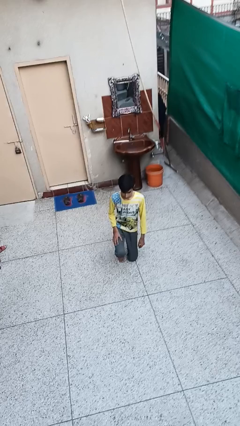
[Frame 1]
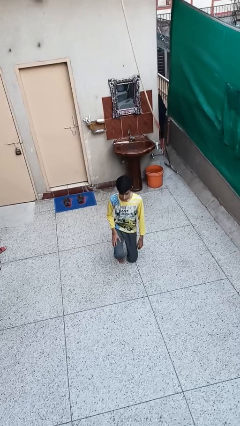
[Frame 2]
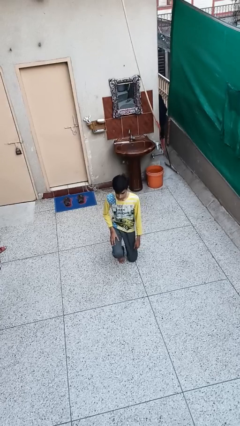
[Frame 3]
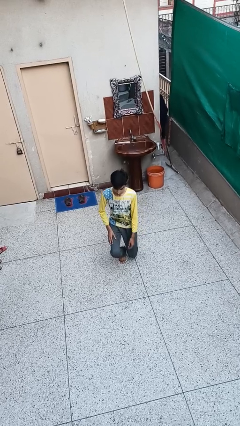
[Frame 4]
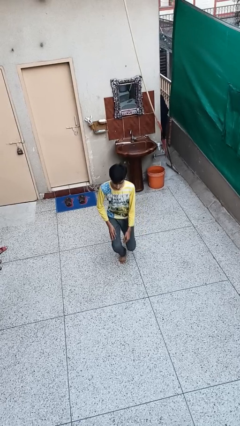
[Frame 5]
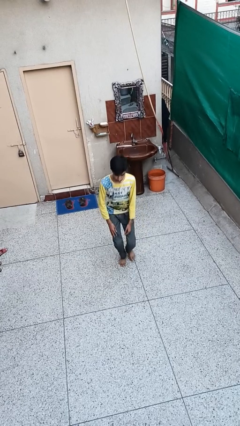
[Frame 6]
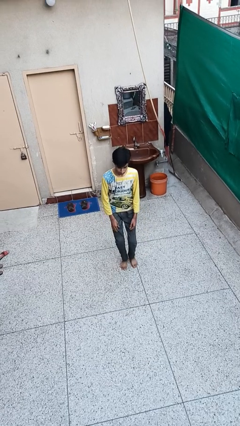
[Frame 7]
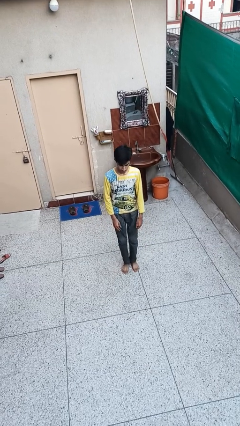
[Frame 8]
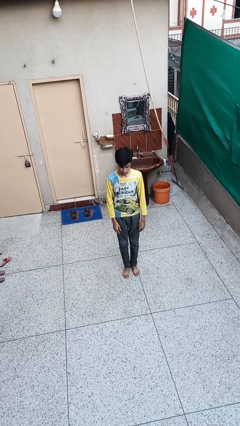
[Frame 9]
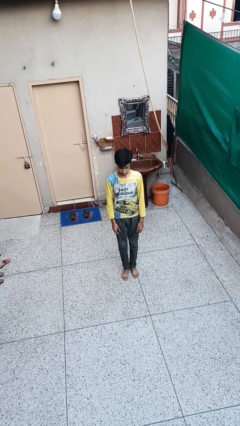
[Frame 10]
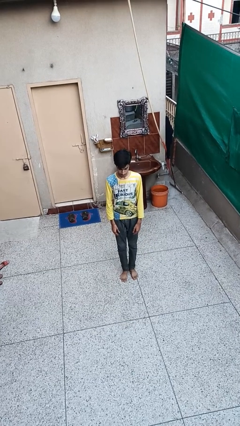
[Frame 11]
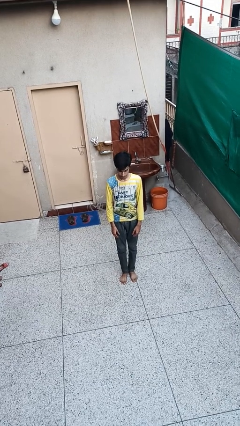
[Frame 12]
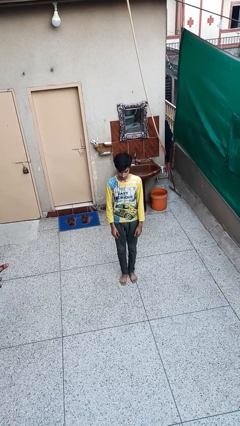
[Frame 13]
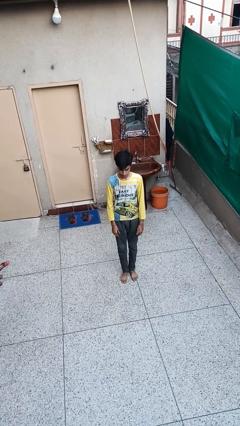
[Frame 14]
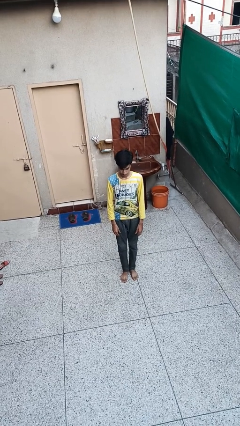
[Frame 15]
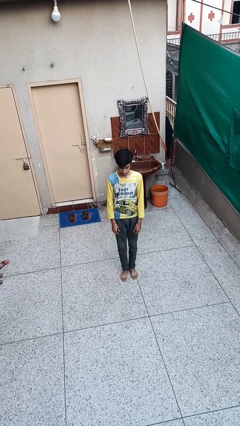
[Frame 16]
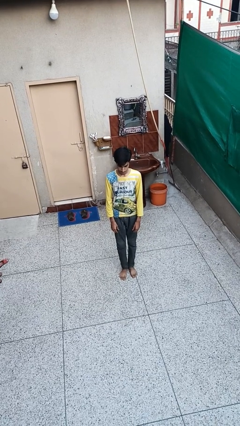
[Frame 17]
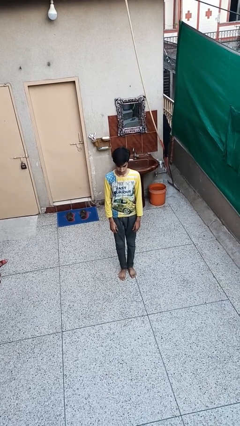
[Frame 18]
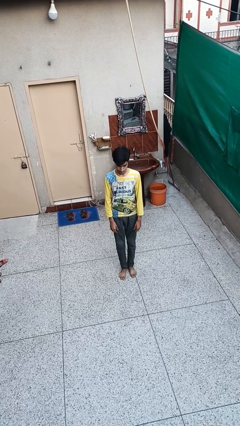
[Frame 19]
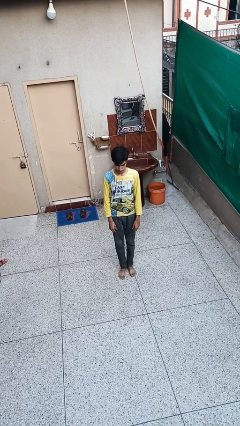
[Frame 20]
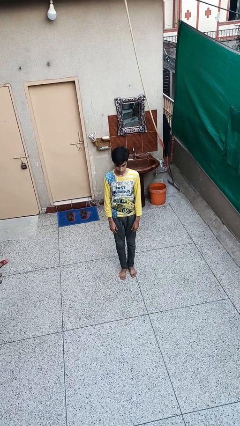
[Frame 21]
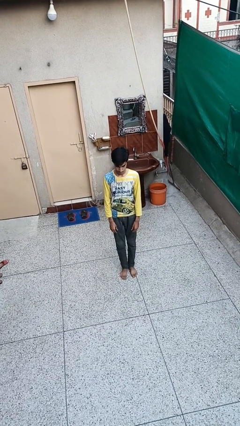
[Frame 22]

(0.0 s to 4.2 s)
person stands up from floor

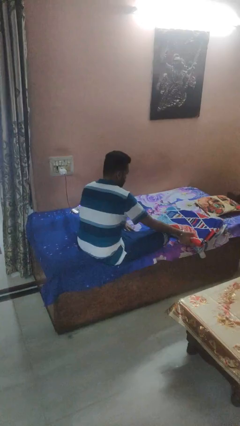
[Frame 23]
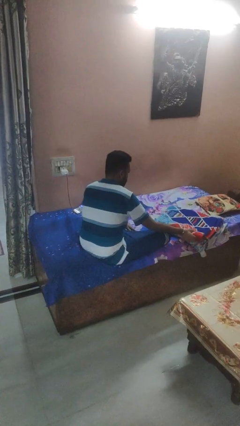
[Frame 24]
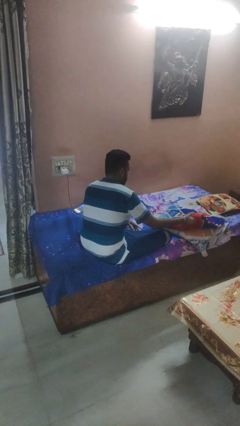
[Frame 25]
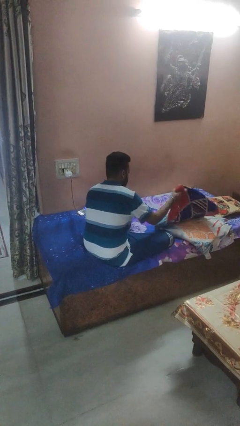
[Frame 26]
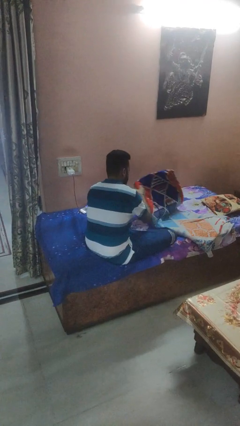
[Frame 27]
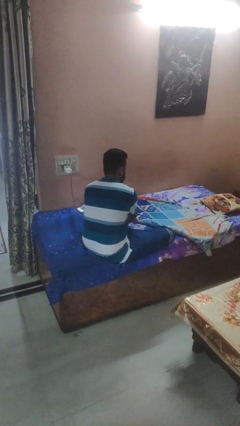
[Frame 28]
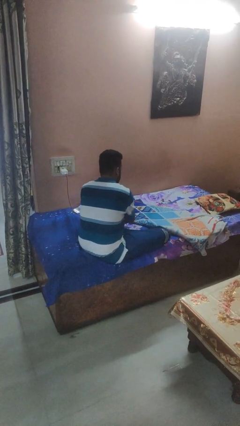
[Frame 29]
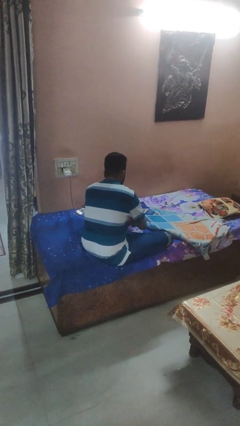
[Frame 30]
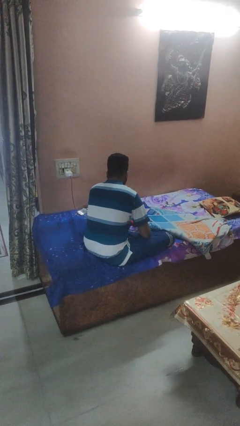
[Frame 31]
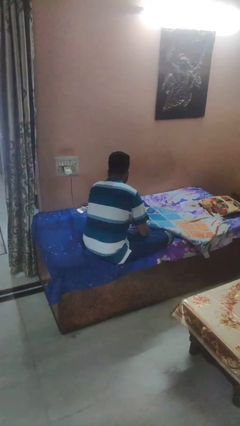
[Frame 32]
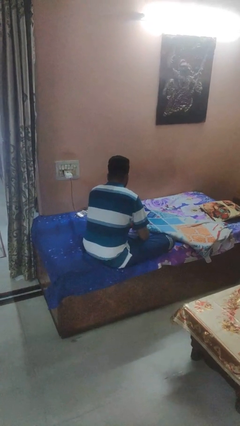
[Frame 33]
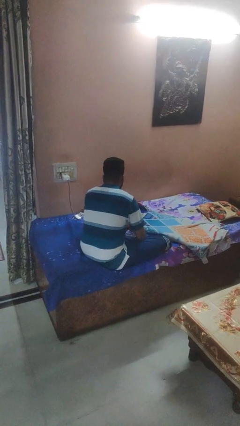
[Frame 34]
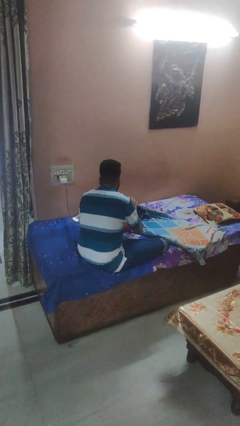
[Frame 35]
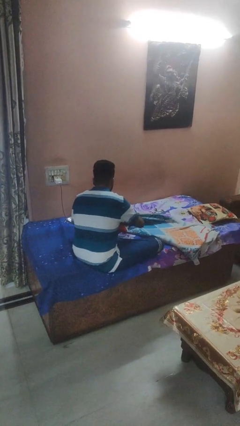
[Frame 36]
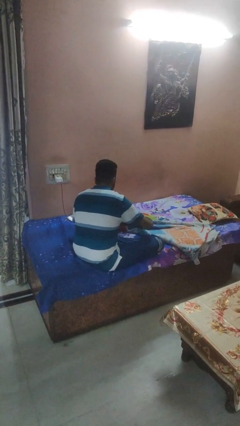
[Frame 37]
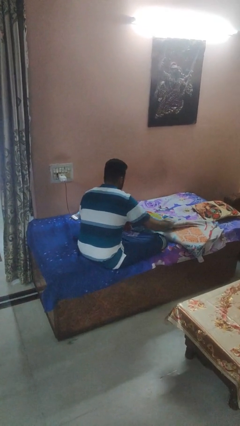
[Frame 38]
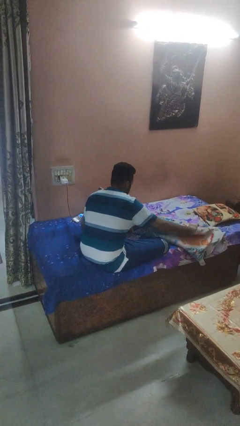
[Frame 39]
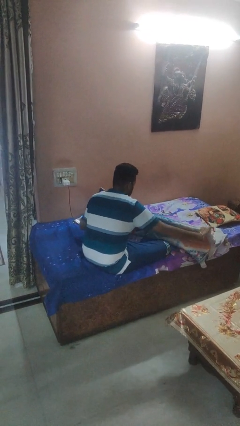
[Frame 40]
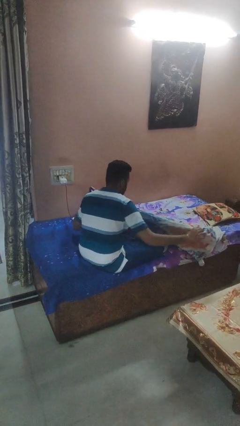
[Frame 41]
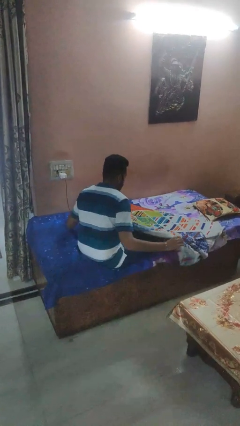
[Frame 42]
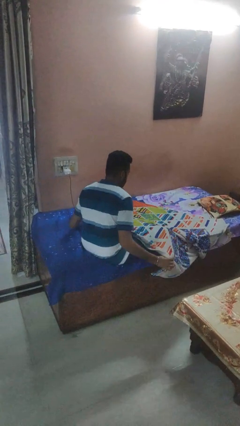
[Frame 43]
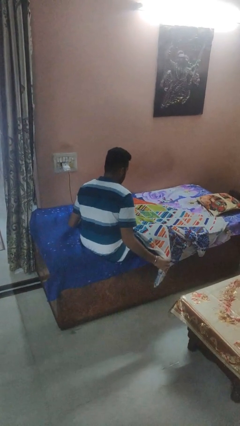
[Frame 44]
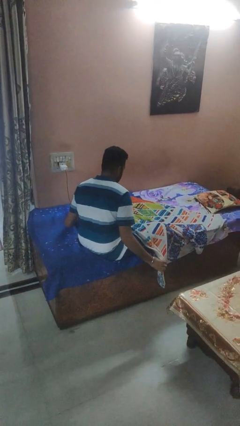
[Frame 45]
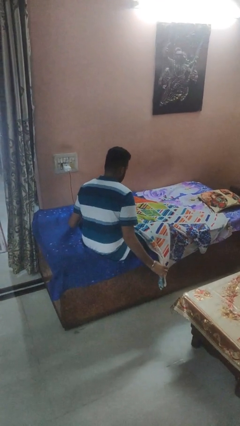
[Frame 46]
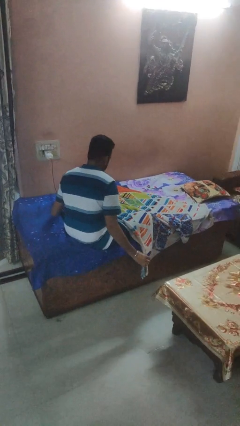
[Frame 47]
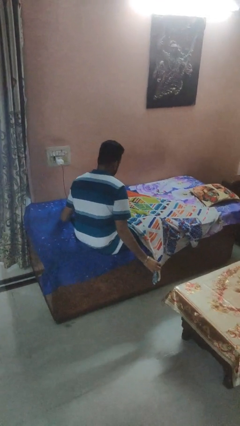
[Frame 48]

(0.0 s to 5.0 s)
person unfolds blanket

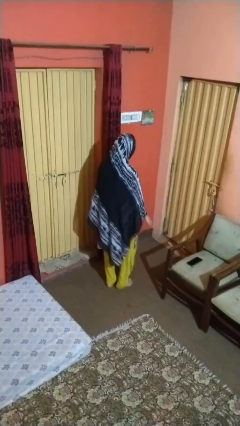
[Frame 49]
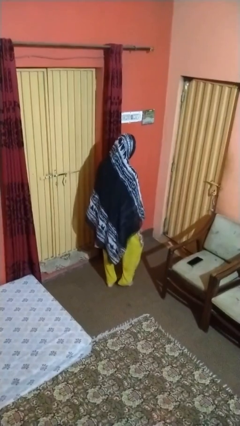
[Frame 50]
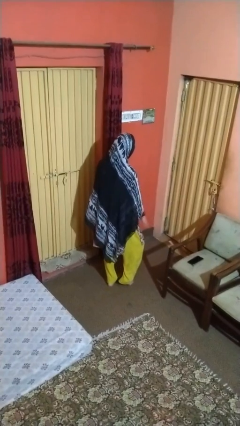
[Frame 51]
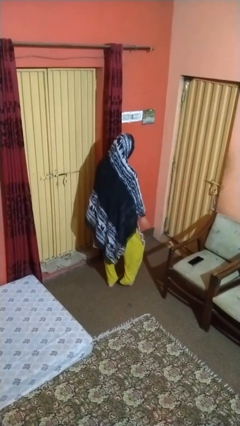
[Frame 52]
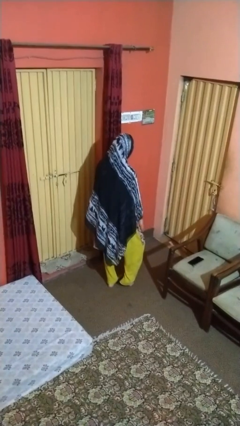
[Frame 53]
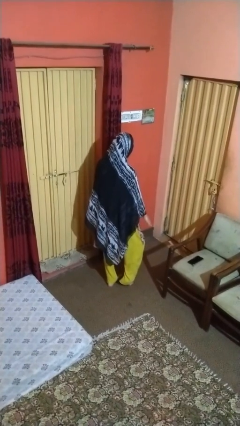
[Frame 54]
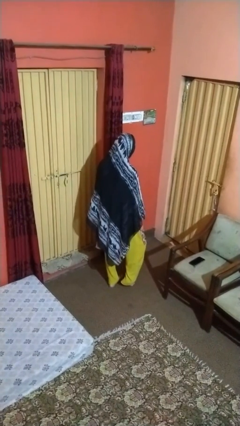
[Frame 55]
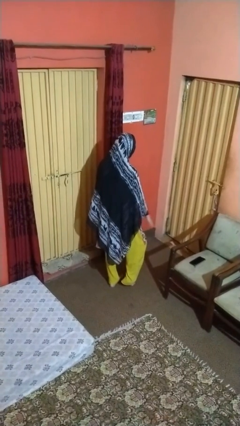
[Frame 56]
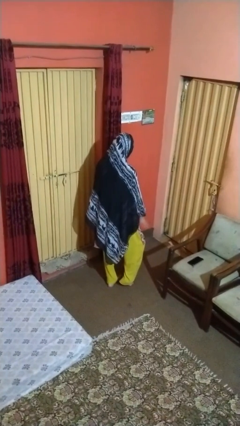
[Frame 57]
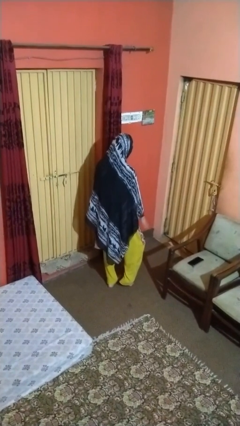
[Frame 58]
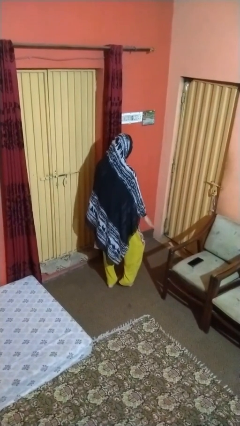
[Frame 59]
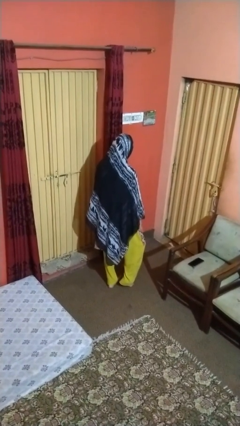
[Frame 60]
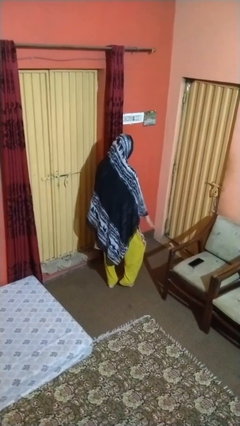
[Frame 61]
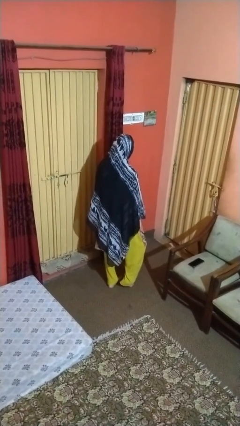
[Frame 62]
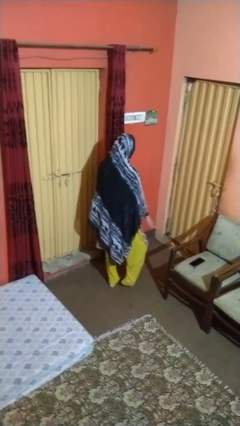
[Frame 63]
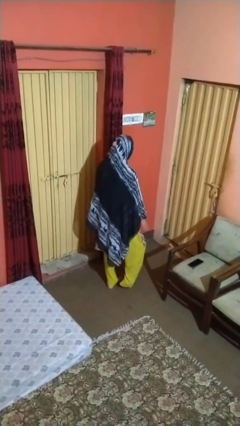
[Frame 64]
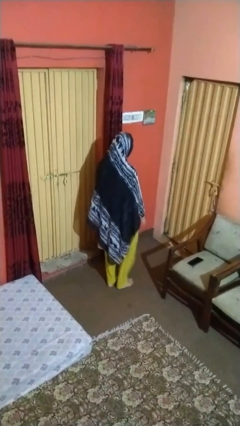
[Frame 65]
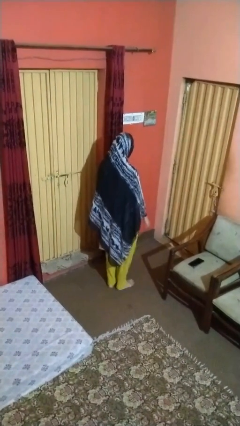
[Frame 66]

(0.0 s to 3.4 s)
person slaps hands on thighs

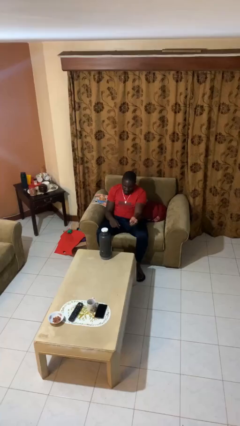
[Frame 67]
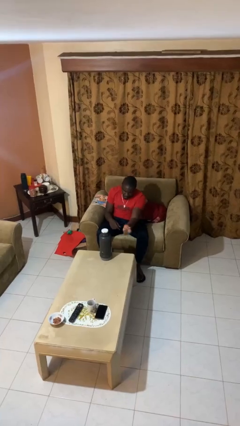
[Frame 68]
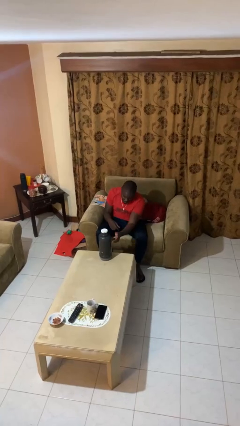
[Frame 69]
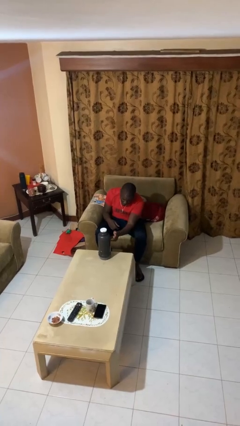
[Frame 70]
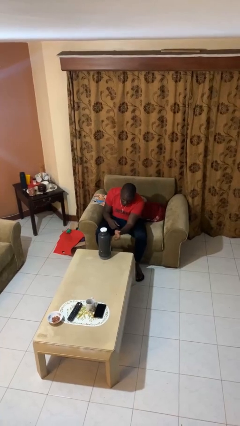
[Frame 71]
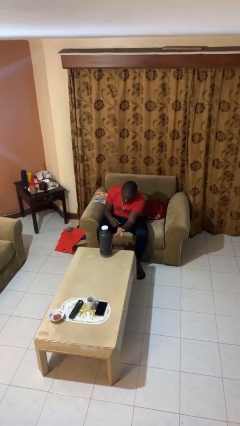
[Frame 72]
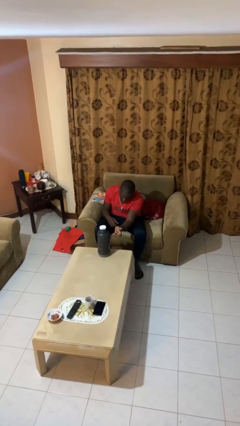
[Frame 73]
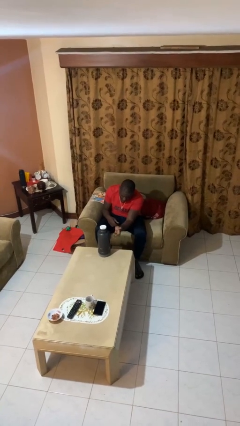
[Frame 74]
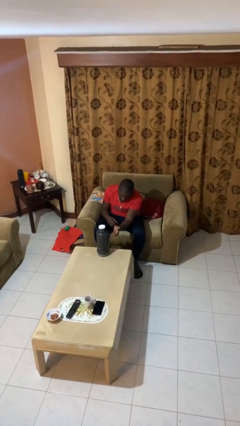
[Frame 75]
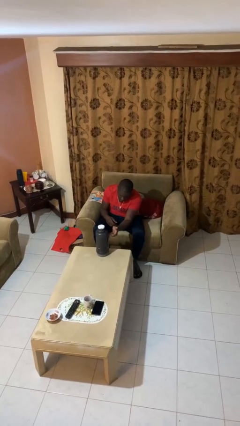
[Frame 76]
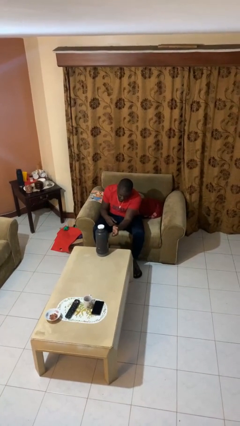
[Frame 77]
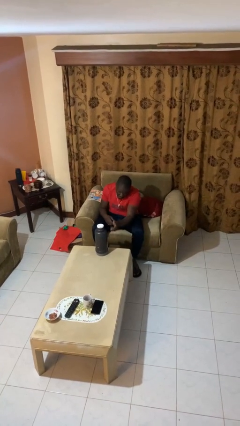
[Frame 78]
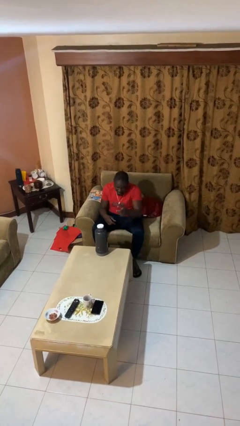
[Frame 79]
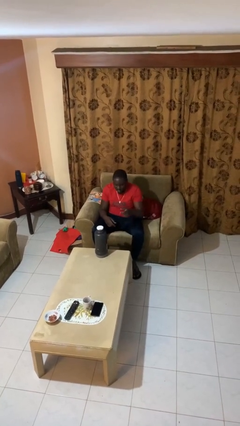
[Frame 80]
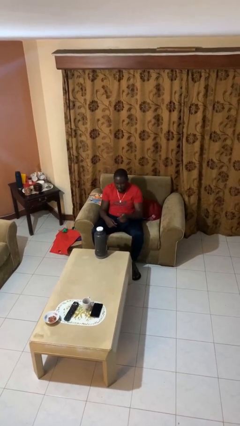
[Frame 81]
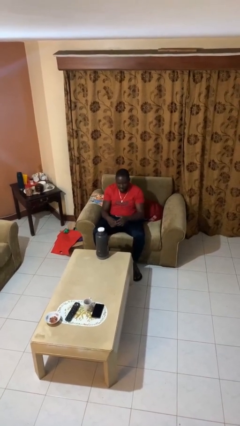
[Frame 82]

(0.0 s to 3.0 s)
person taps object with finger

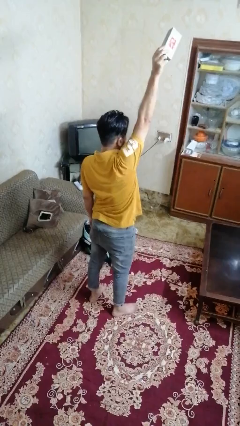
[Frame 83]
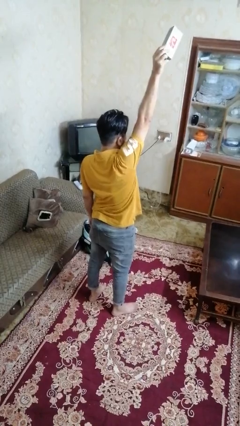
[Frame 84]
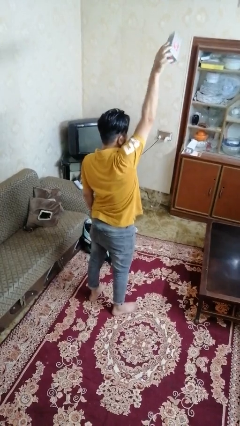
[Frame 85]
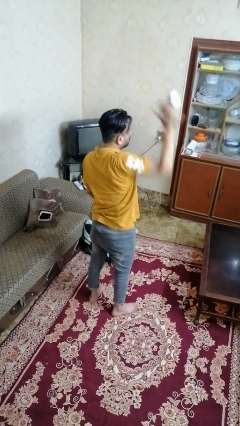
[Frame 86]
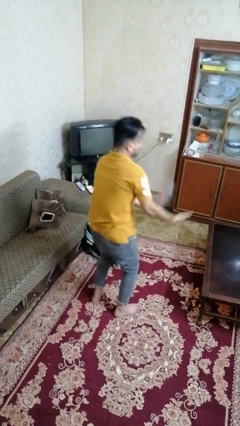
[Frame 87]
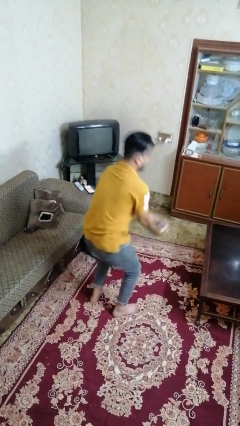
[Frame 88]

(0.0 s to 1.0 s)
person drops object

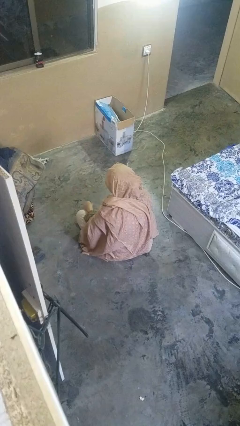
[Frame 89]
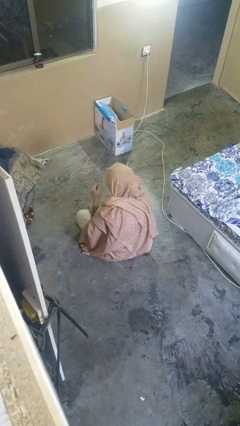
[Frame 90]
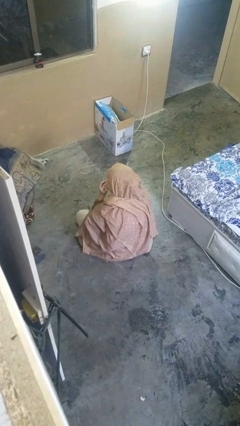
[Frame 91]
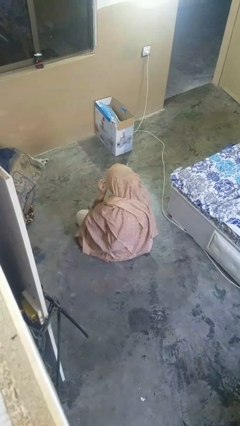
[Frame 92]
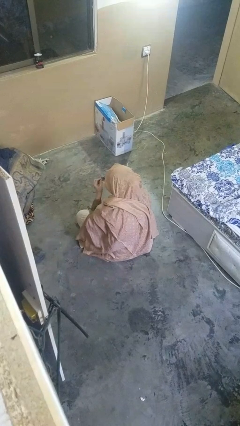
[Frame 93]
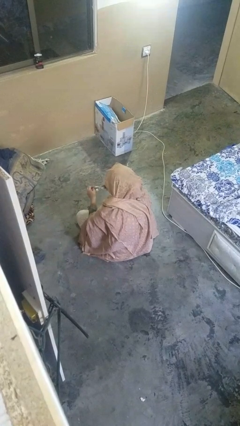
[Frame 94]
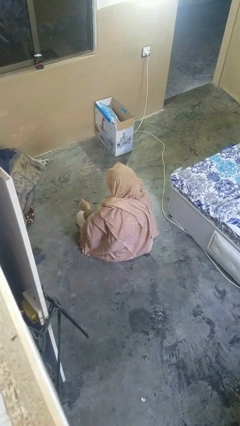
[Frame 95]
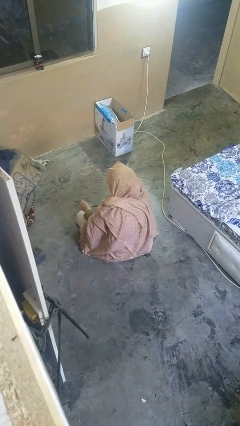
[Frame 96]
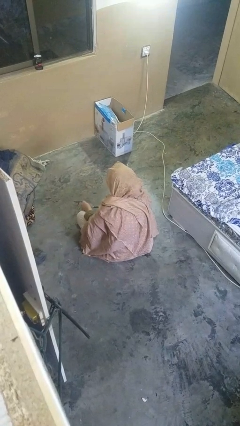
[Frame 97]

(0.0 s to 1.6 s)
person takes off glasses
